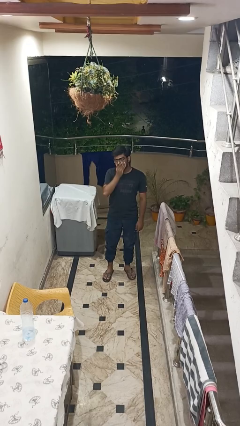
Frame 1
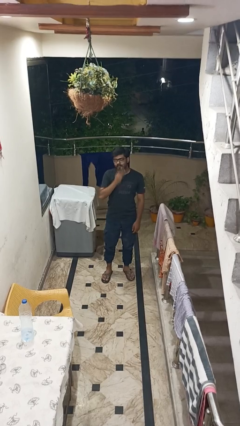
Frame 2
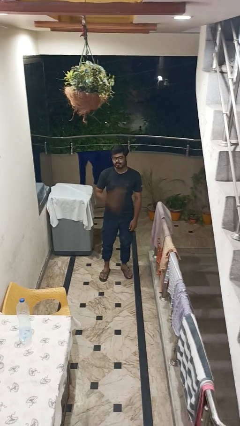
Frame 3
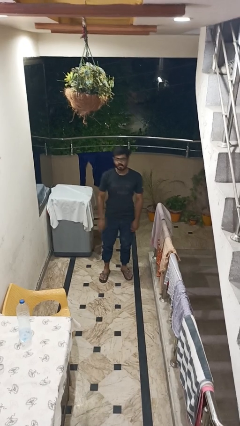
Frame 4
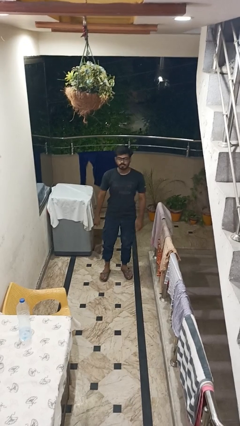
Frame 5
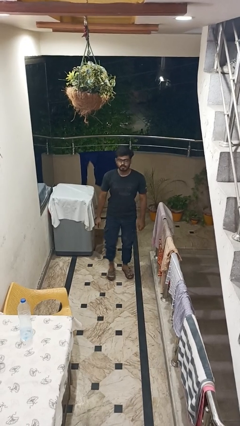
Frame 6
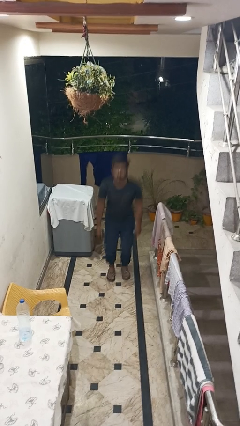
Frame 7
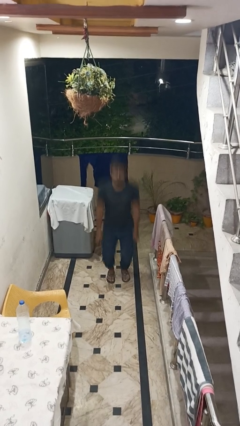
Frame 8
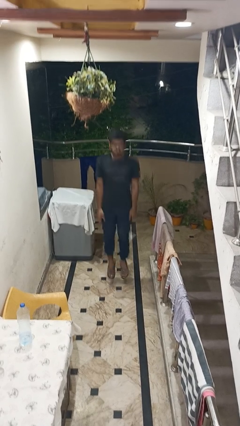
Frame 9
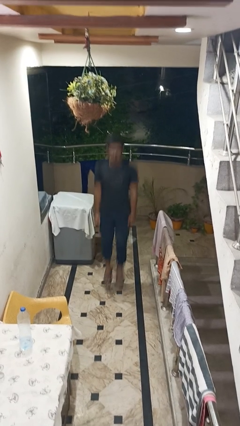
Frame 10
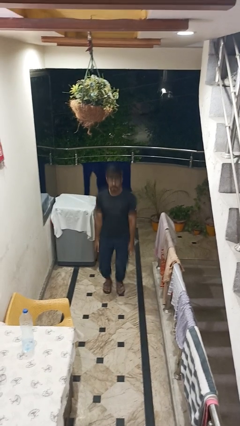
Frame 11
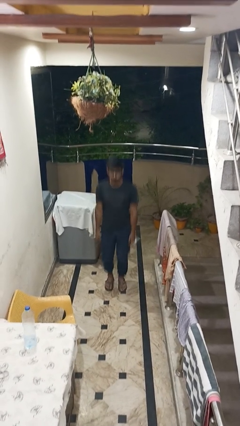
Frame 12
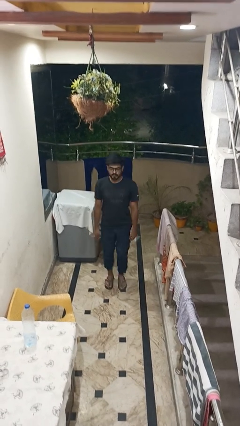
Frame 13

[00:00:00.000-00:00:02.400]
person jumps

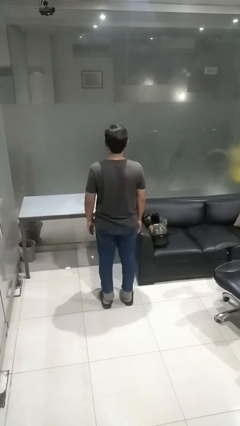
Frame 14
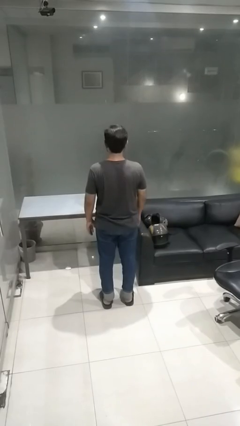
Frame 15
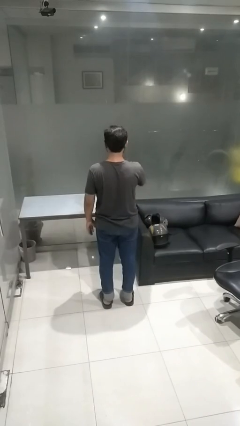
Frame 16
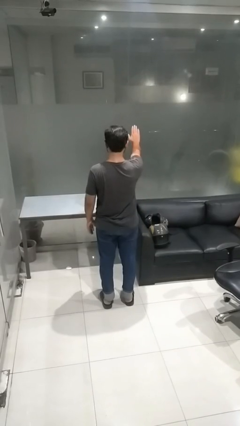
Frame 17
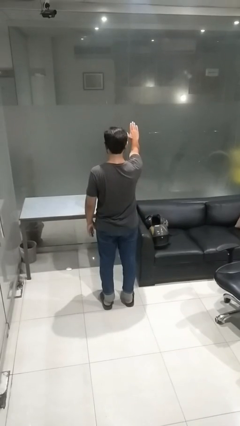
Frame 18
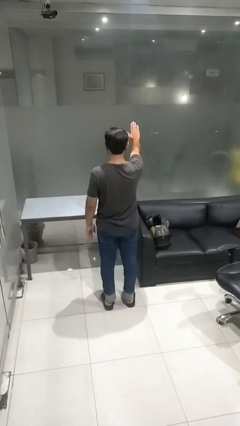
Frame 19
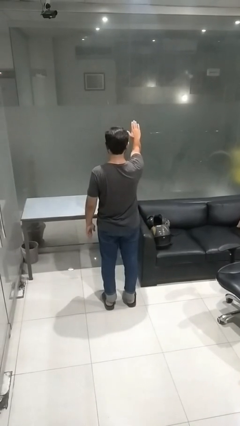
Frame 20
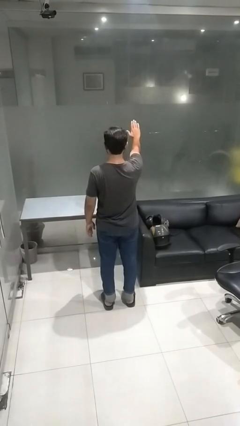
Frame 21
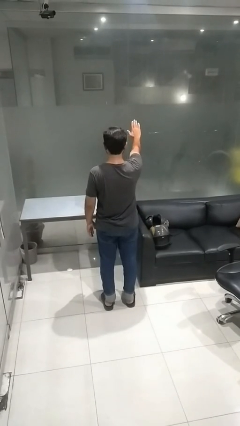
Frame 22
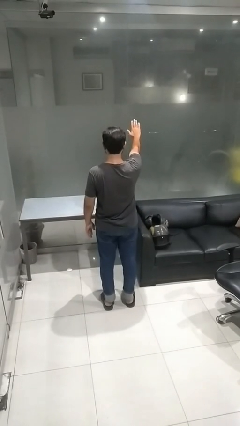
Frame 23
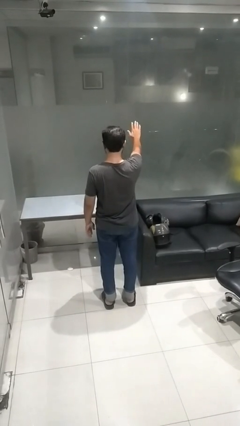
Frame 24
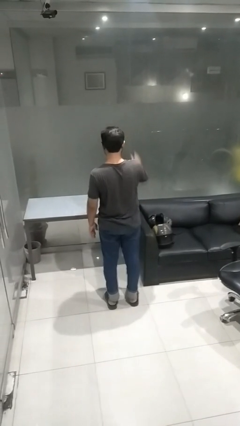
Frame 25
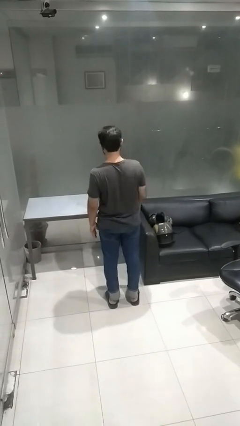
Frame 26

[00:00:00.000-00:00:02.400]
person gestures stop

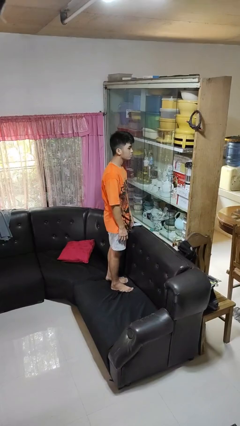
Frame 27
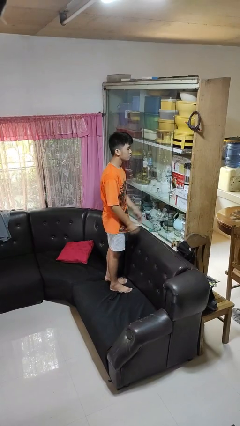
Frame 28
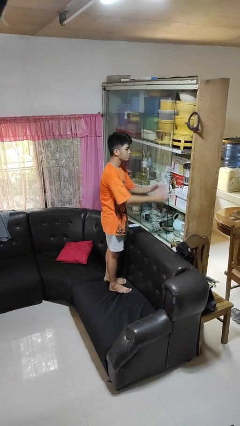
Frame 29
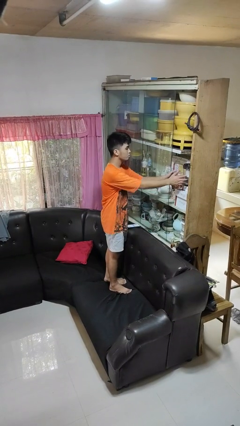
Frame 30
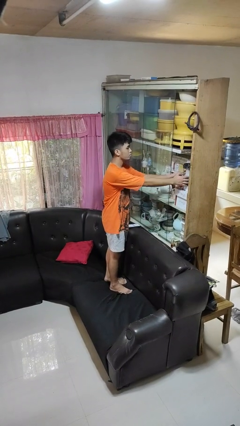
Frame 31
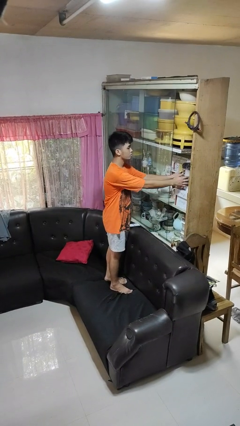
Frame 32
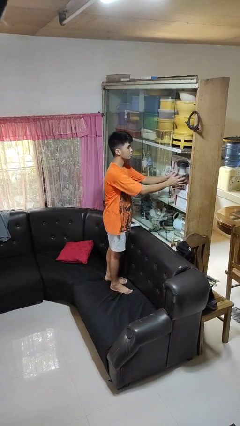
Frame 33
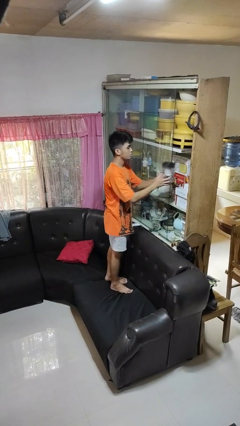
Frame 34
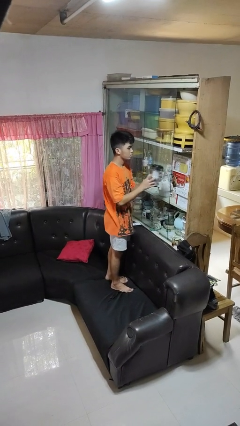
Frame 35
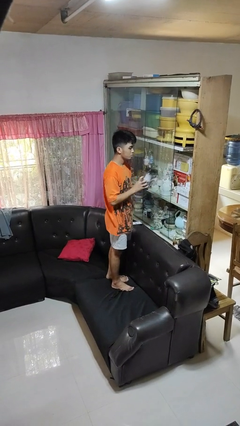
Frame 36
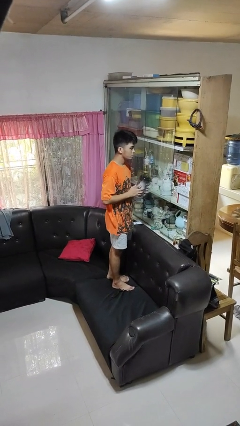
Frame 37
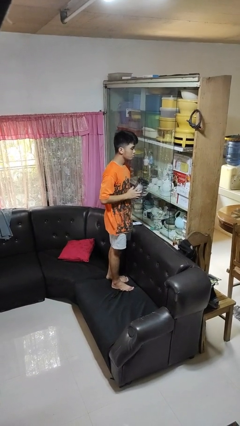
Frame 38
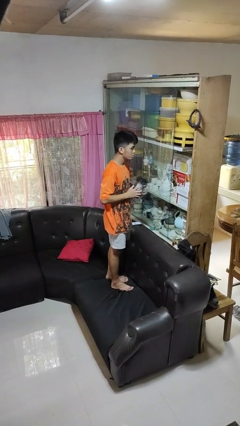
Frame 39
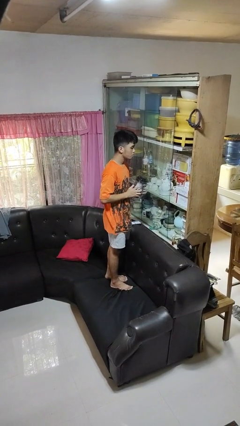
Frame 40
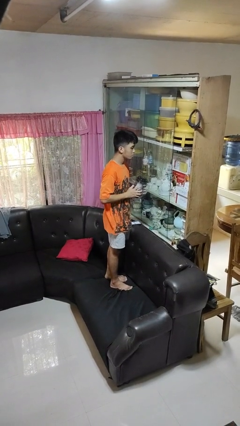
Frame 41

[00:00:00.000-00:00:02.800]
person picks up object from cabinet

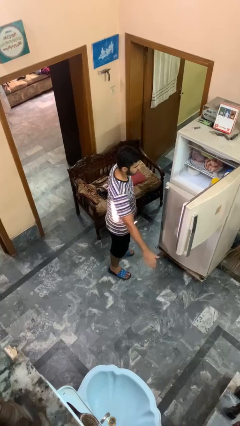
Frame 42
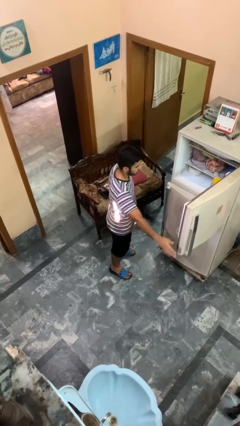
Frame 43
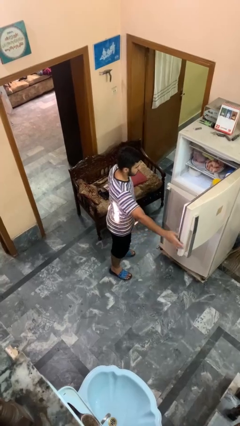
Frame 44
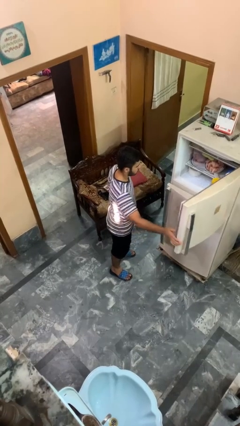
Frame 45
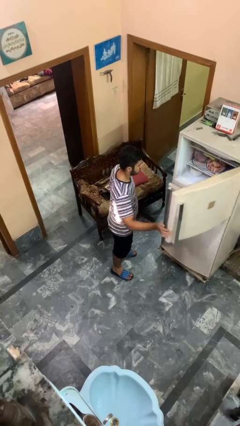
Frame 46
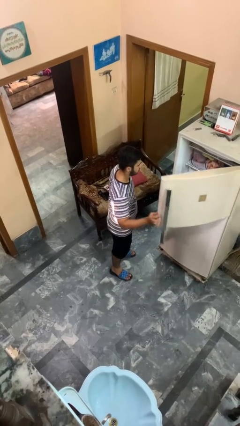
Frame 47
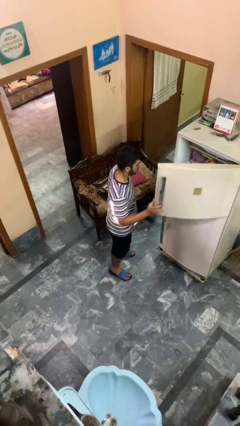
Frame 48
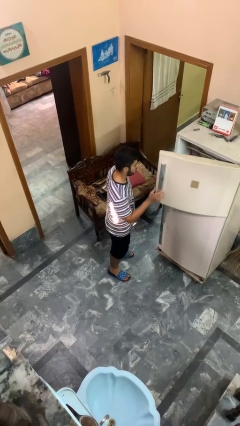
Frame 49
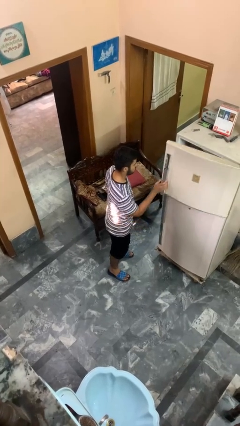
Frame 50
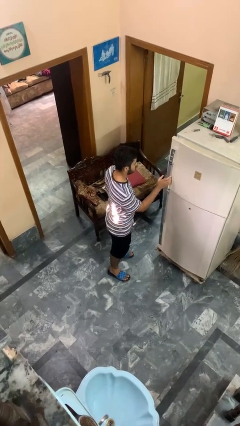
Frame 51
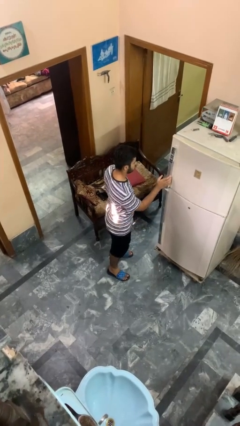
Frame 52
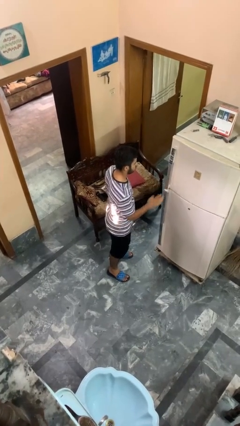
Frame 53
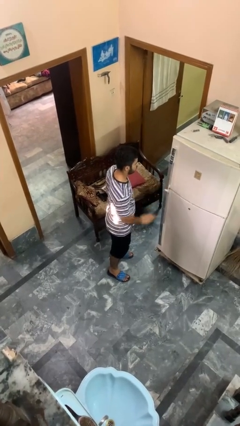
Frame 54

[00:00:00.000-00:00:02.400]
person closes refrigerator

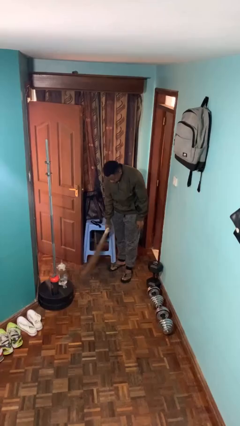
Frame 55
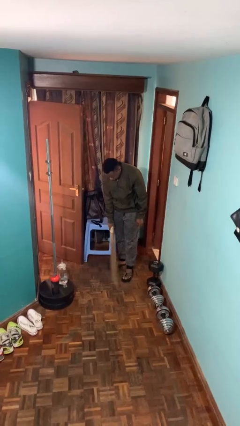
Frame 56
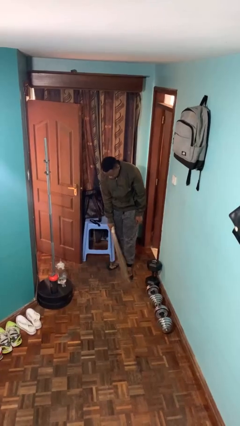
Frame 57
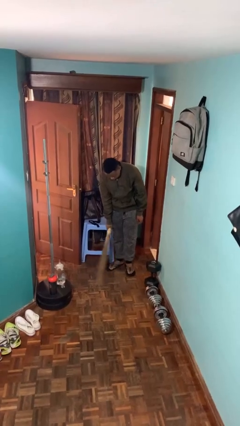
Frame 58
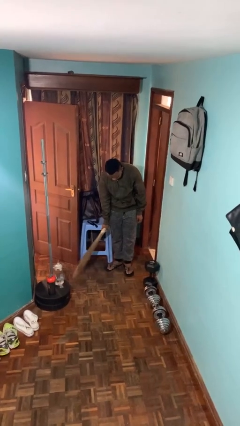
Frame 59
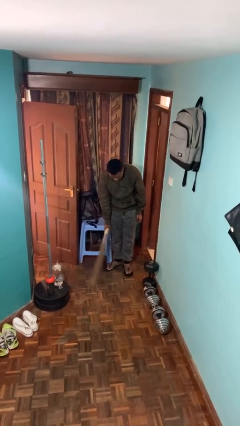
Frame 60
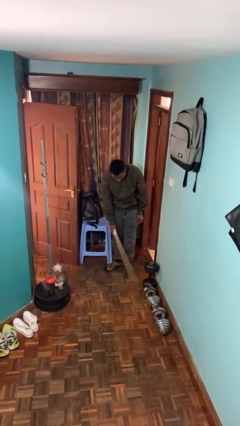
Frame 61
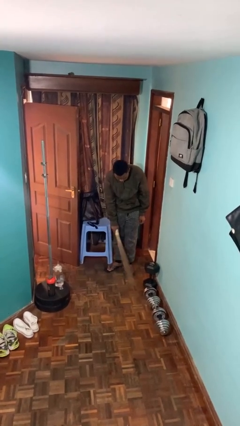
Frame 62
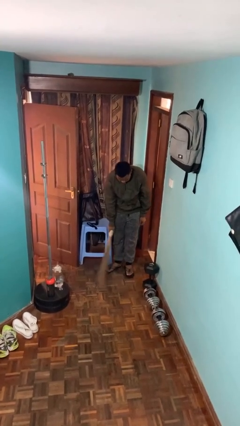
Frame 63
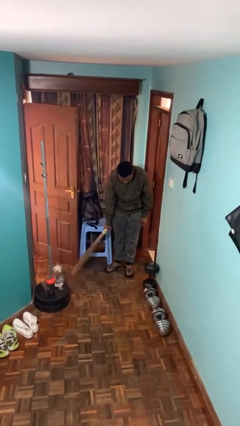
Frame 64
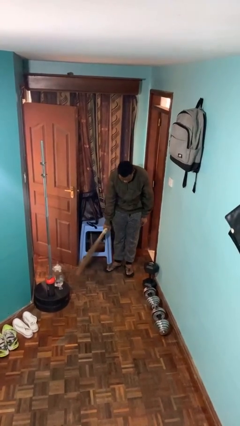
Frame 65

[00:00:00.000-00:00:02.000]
person sweeps floor

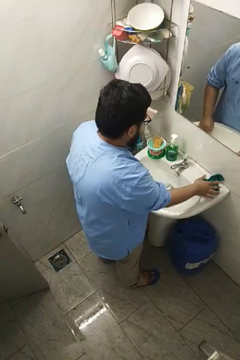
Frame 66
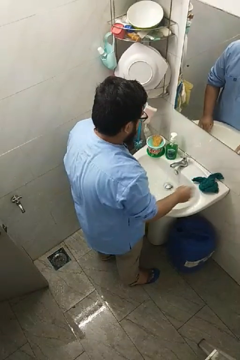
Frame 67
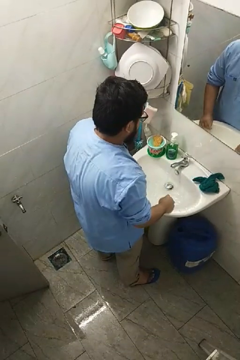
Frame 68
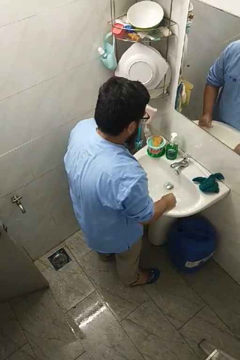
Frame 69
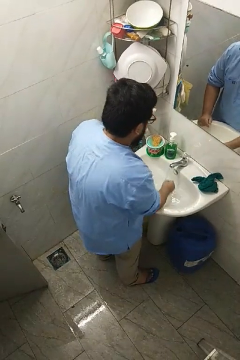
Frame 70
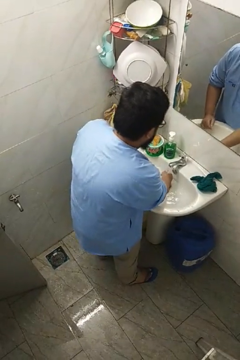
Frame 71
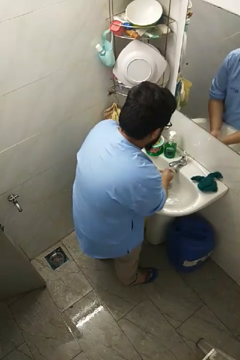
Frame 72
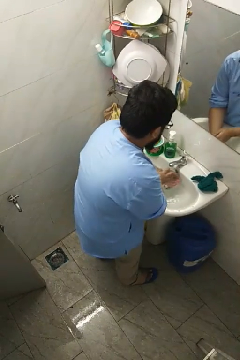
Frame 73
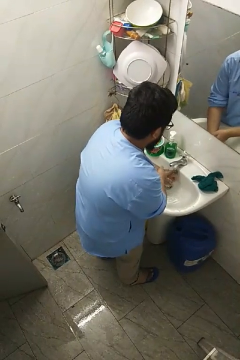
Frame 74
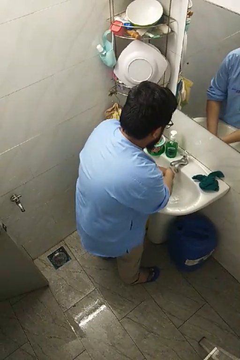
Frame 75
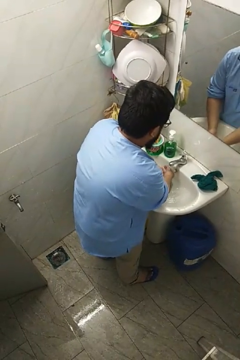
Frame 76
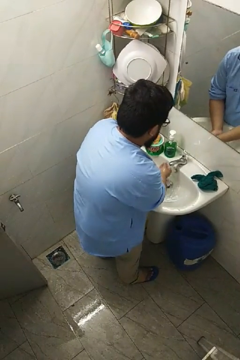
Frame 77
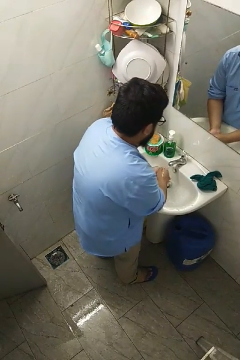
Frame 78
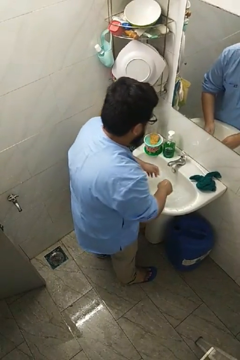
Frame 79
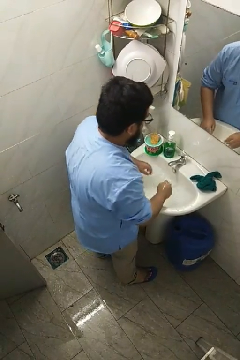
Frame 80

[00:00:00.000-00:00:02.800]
person washes hands

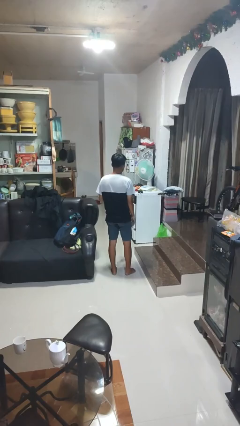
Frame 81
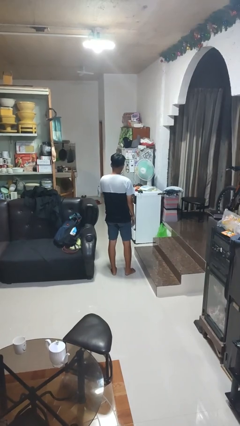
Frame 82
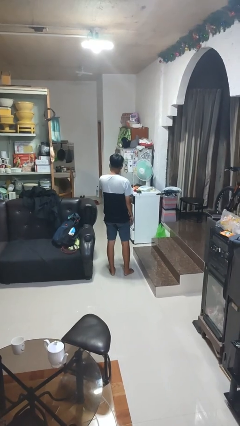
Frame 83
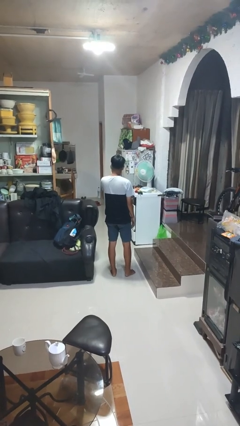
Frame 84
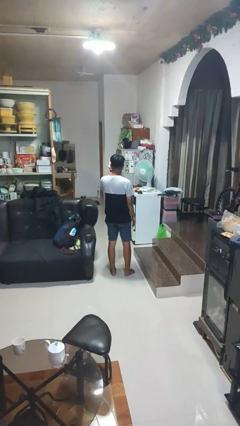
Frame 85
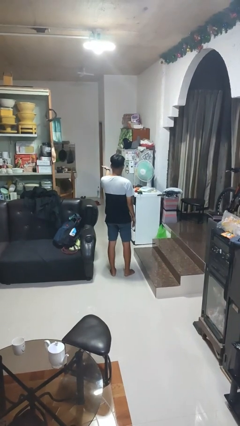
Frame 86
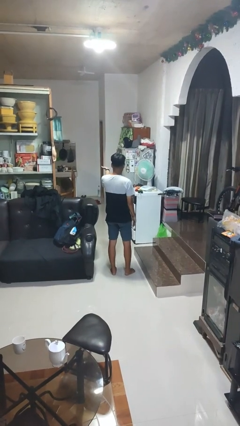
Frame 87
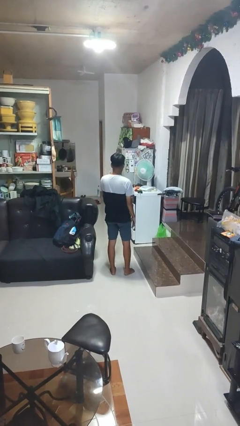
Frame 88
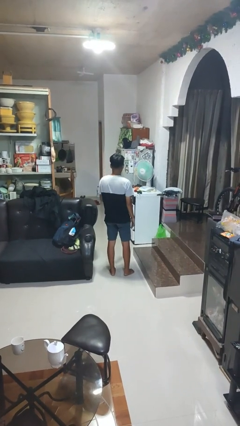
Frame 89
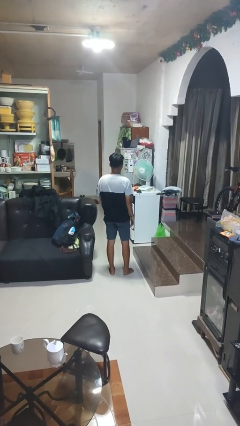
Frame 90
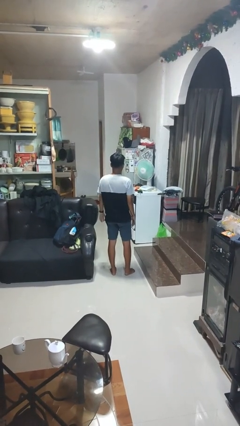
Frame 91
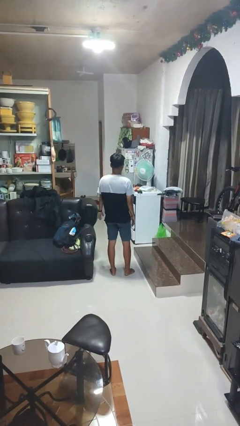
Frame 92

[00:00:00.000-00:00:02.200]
person gestures blow kiss

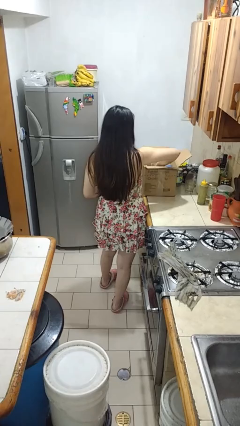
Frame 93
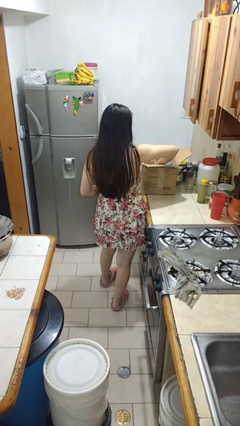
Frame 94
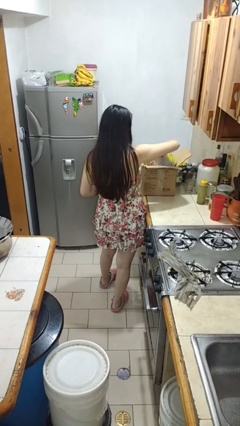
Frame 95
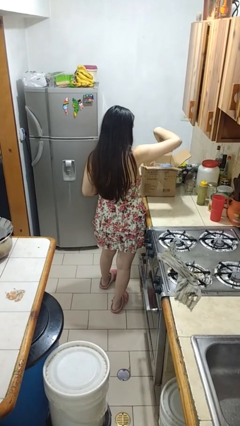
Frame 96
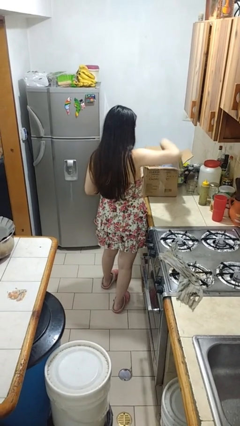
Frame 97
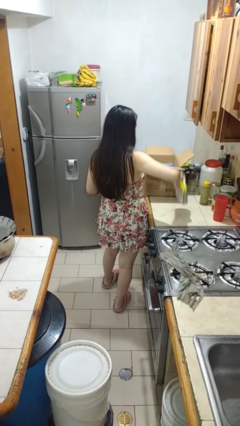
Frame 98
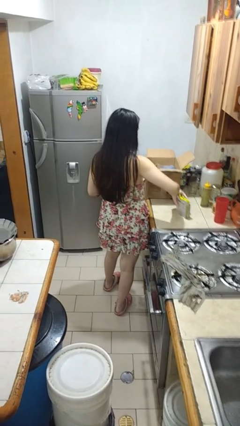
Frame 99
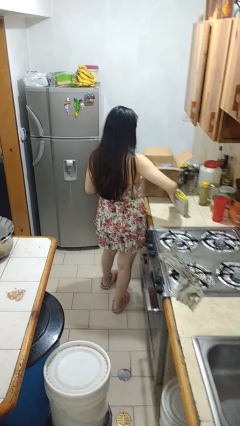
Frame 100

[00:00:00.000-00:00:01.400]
person takes object from box
